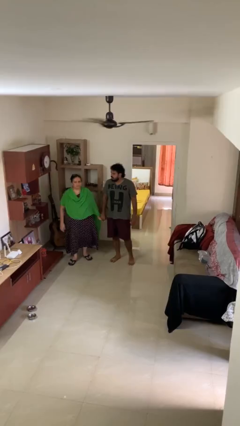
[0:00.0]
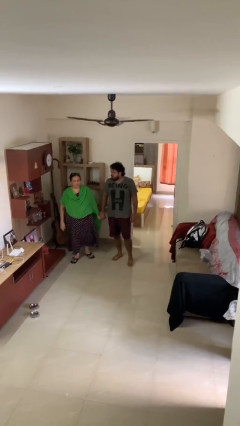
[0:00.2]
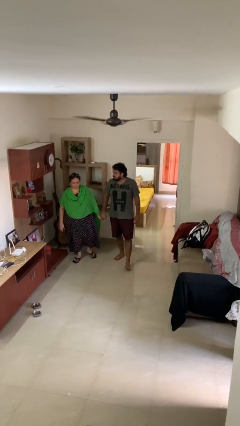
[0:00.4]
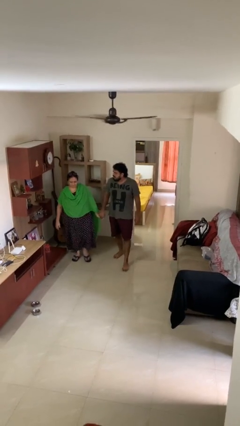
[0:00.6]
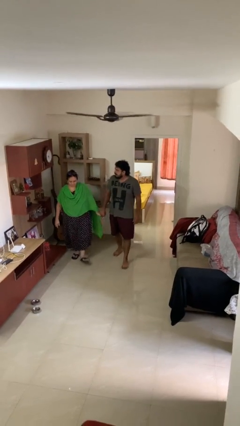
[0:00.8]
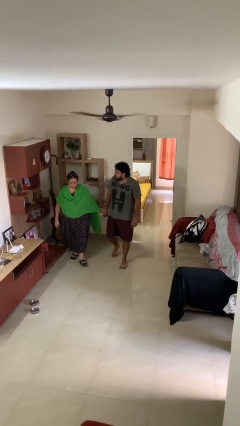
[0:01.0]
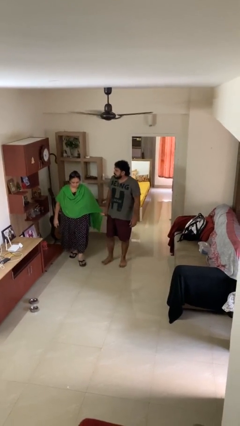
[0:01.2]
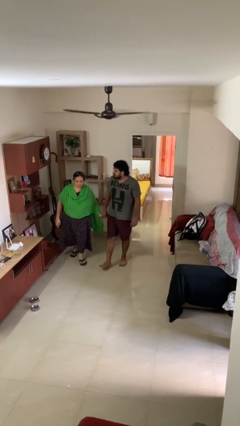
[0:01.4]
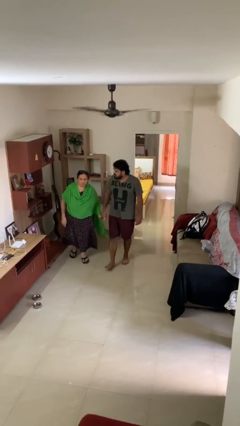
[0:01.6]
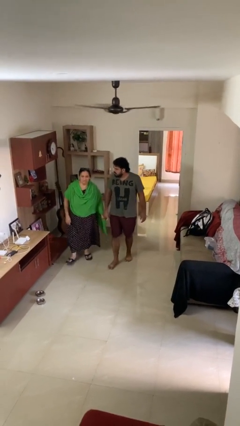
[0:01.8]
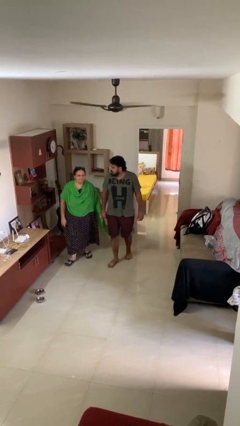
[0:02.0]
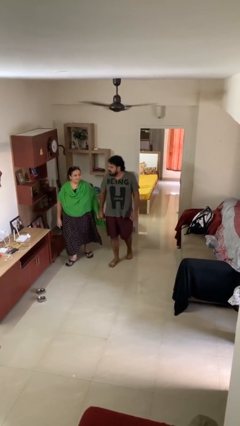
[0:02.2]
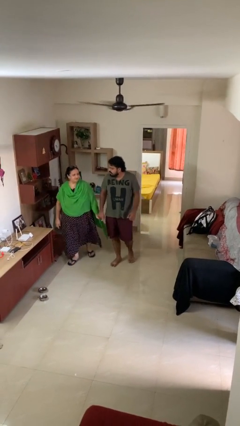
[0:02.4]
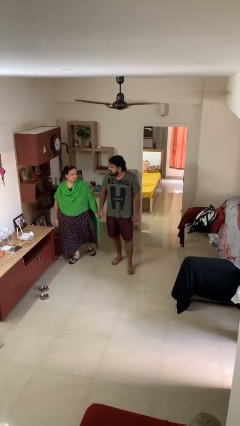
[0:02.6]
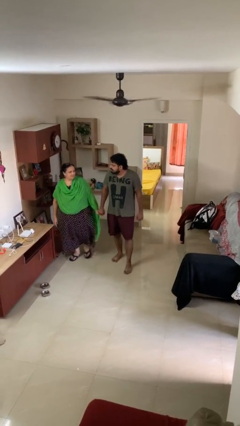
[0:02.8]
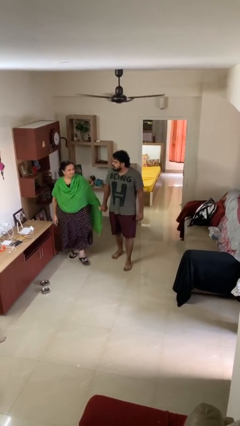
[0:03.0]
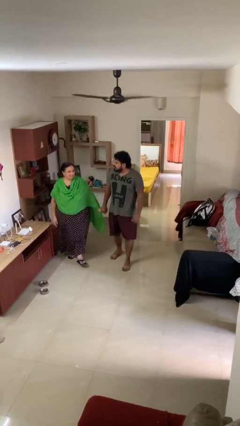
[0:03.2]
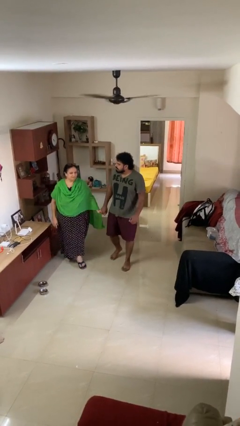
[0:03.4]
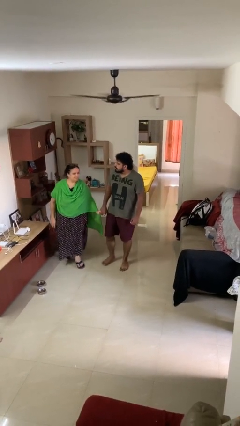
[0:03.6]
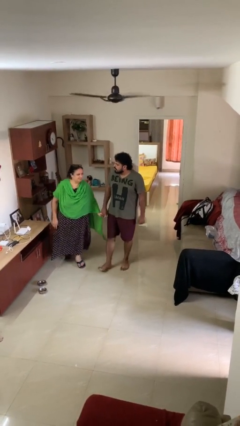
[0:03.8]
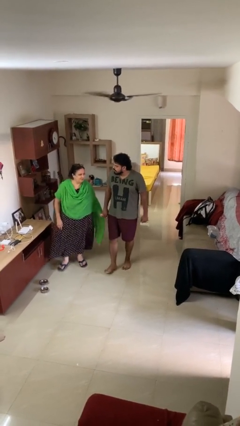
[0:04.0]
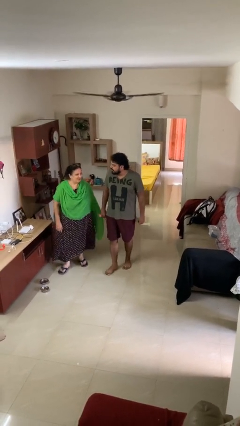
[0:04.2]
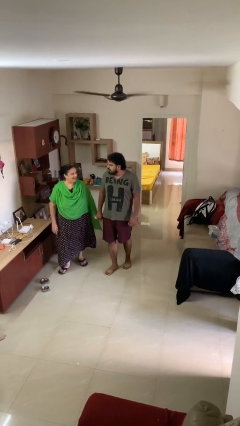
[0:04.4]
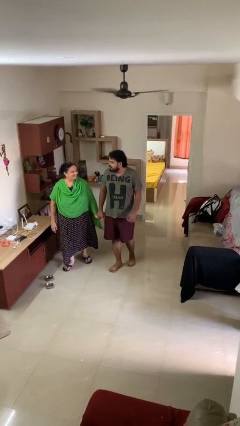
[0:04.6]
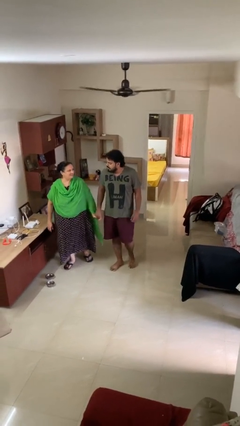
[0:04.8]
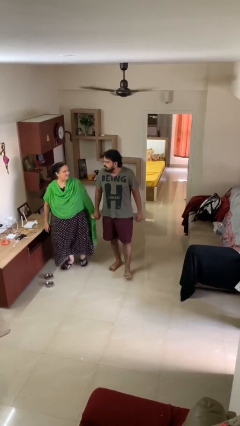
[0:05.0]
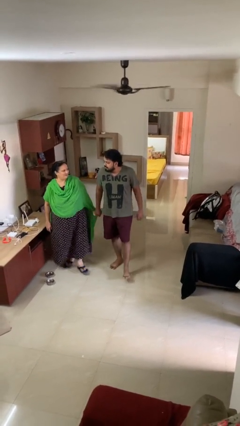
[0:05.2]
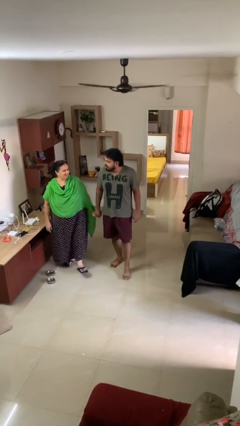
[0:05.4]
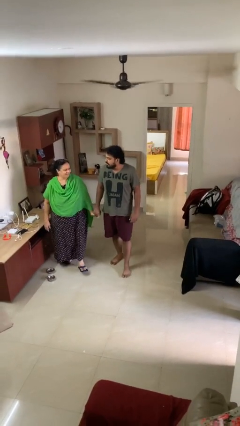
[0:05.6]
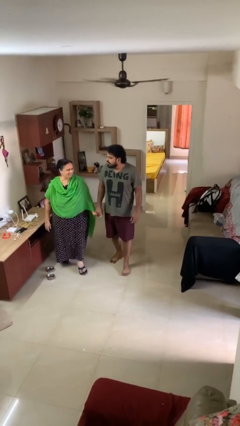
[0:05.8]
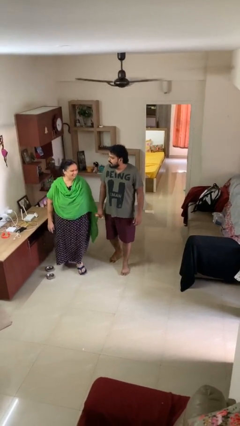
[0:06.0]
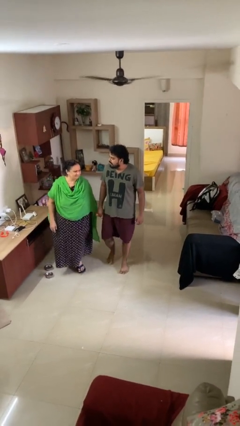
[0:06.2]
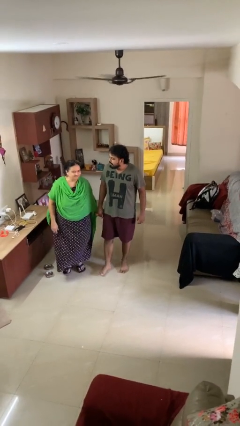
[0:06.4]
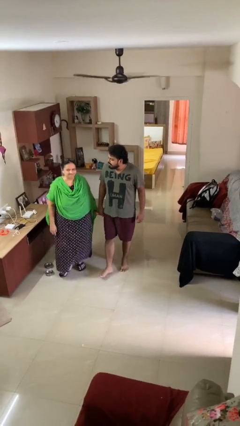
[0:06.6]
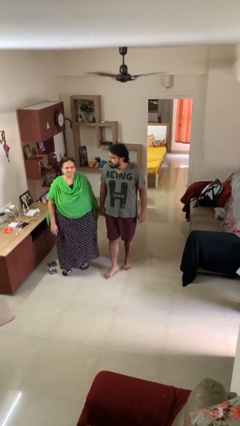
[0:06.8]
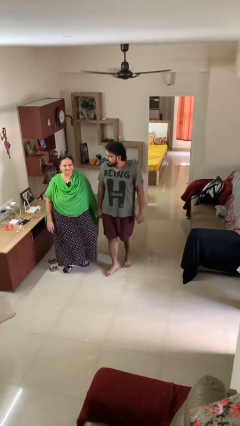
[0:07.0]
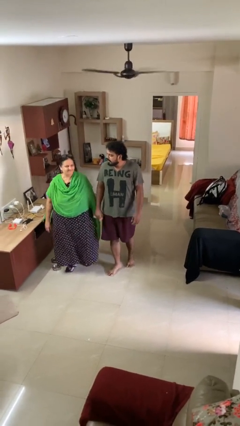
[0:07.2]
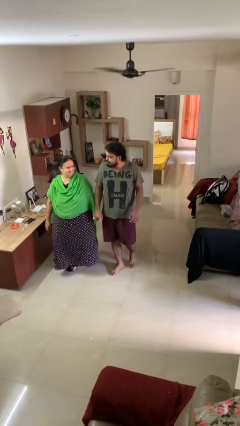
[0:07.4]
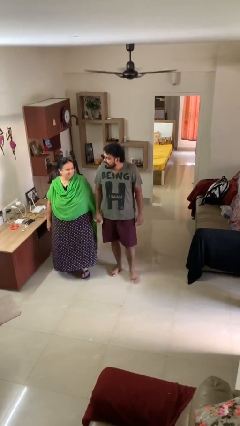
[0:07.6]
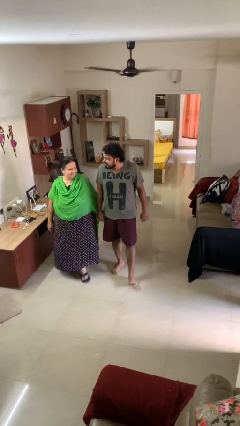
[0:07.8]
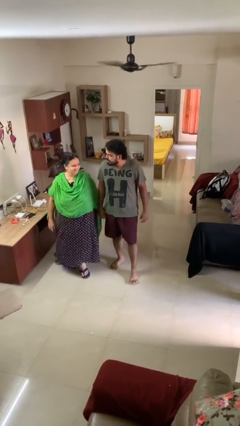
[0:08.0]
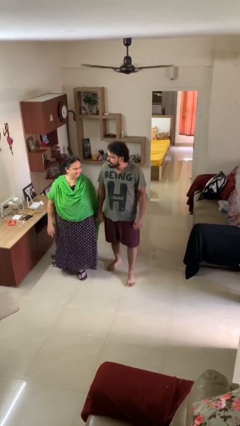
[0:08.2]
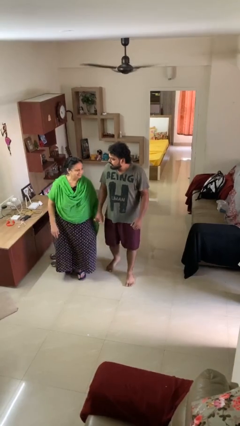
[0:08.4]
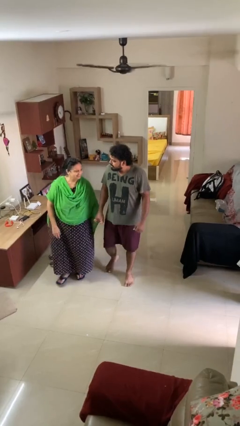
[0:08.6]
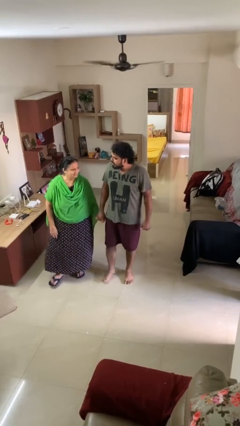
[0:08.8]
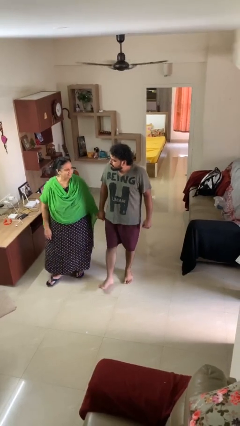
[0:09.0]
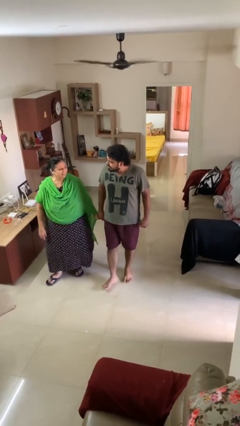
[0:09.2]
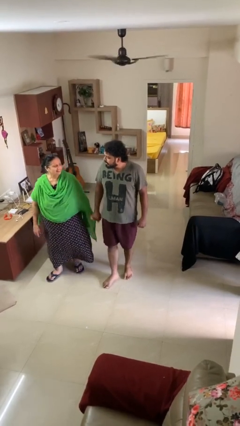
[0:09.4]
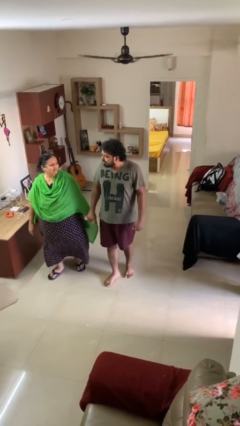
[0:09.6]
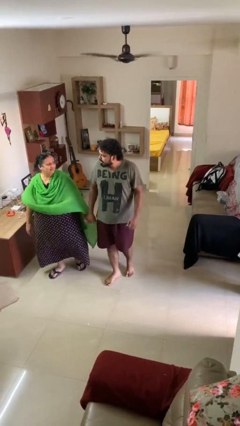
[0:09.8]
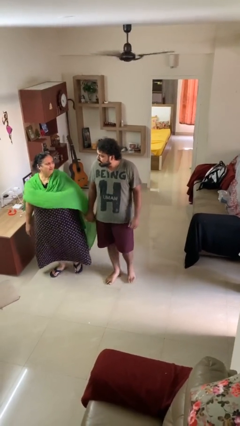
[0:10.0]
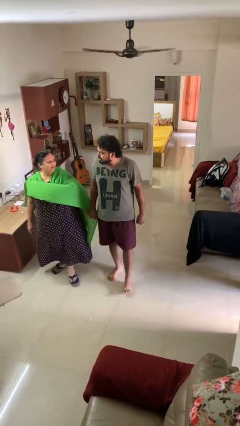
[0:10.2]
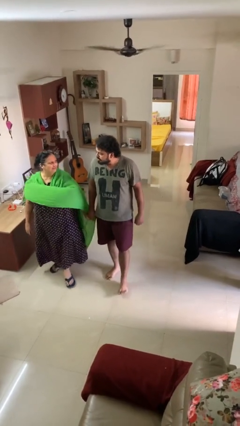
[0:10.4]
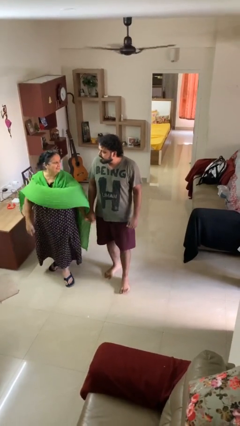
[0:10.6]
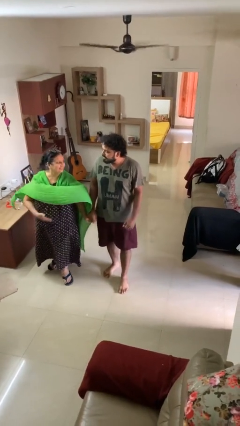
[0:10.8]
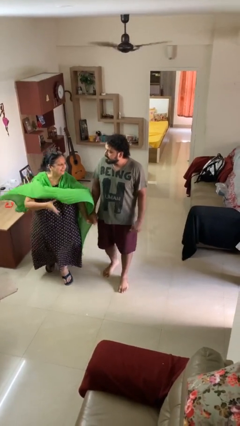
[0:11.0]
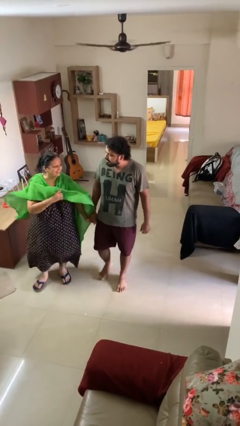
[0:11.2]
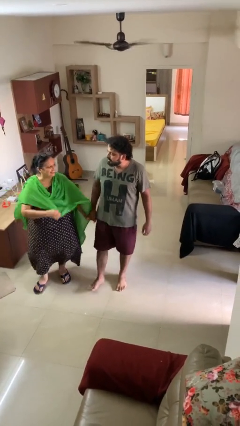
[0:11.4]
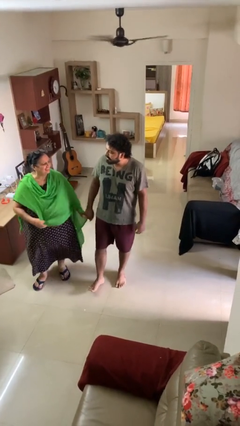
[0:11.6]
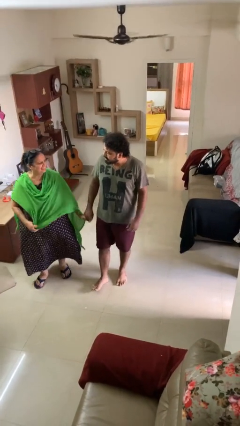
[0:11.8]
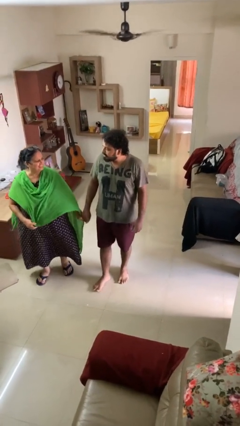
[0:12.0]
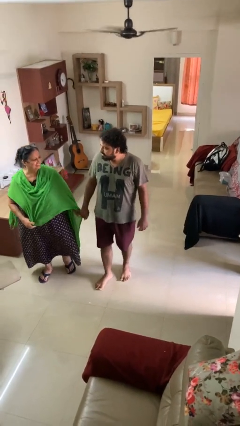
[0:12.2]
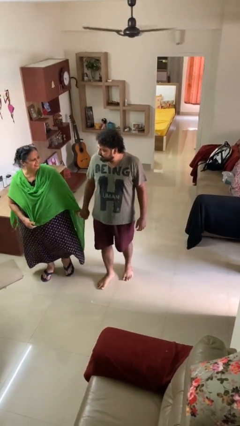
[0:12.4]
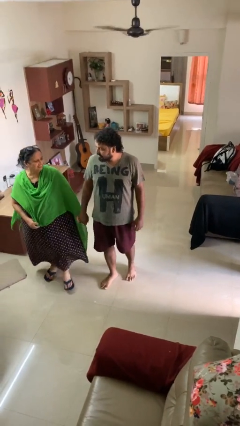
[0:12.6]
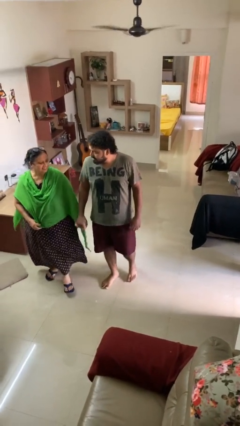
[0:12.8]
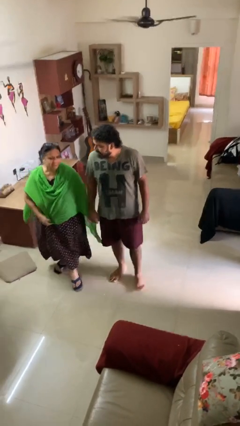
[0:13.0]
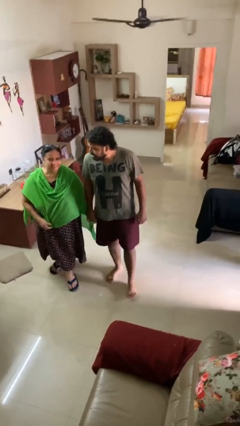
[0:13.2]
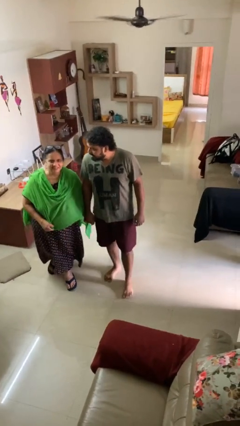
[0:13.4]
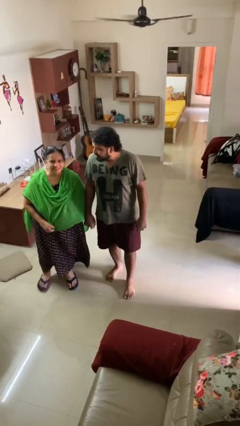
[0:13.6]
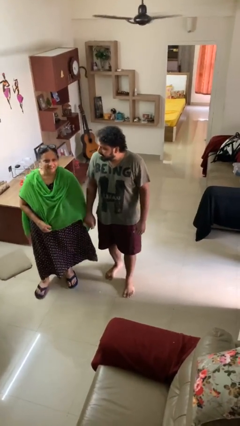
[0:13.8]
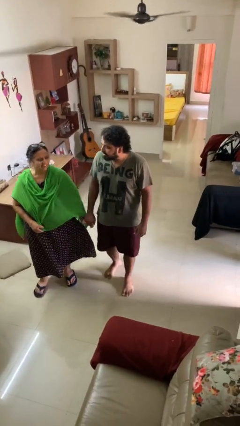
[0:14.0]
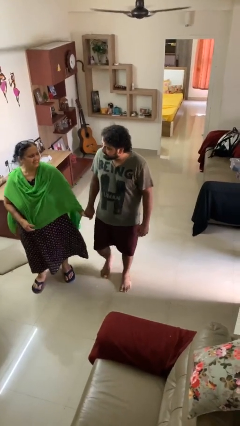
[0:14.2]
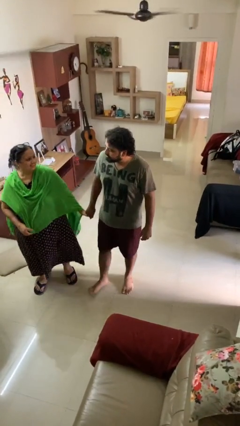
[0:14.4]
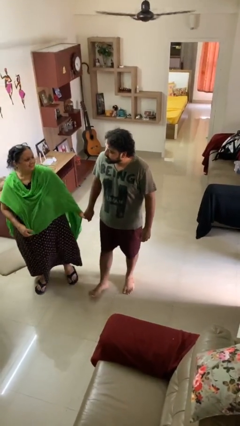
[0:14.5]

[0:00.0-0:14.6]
person holds hand

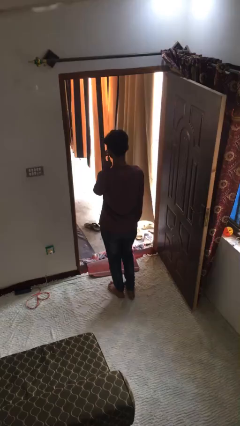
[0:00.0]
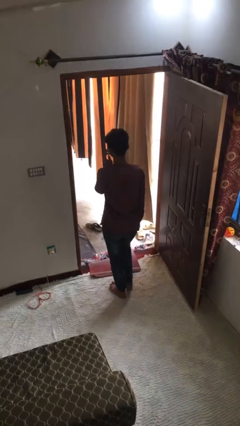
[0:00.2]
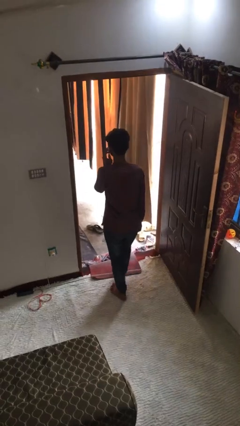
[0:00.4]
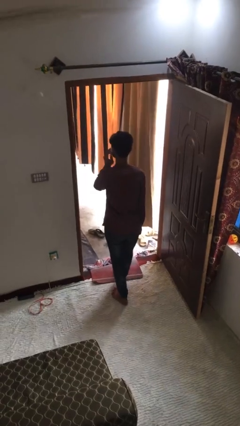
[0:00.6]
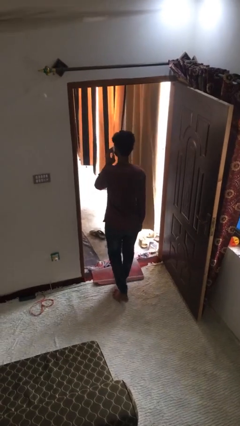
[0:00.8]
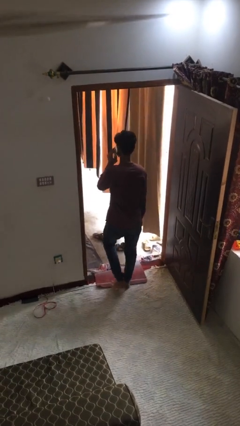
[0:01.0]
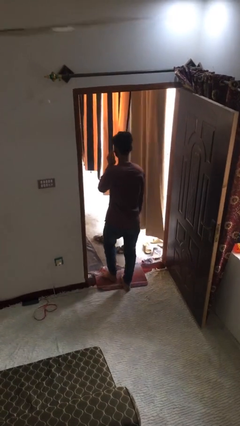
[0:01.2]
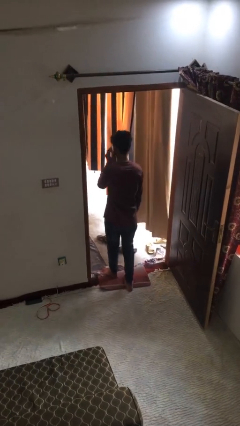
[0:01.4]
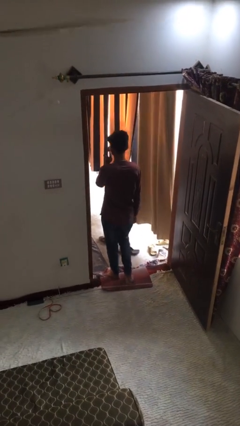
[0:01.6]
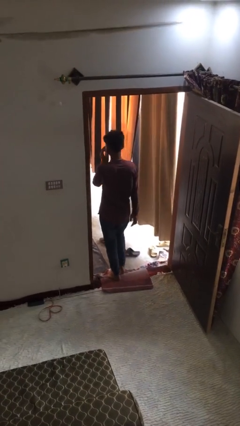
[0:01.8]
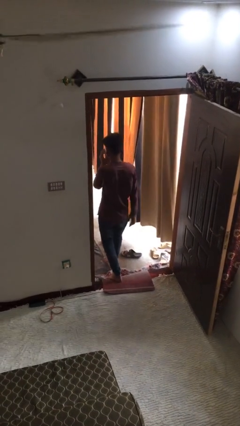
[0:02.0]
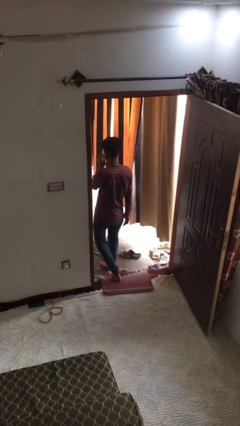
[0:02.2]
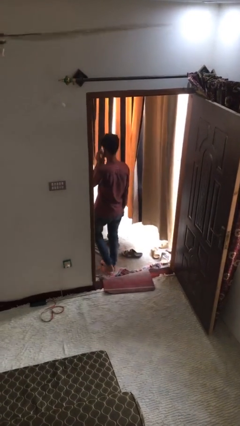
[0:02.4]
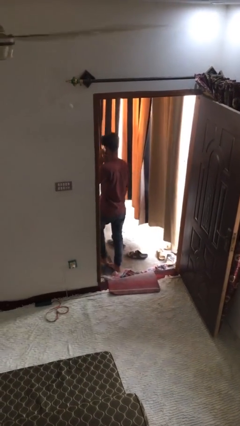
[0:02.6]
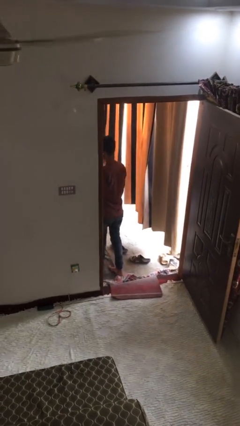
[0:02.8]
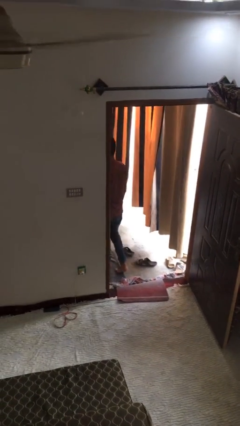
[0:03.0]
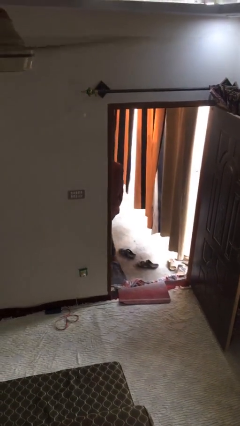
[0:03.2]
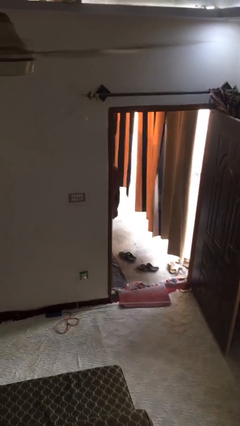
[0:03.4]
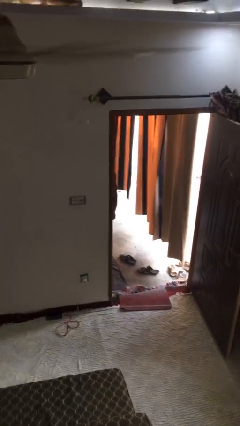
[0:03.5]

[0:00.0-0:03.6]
person exits scene through structure
